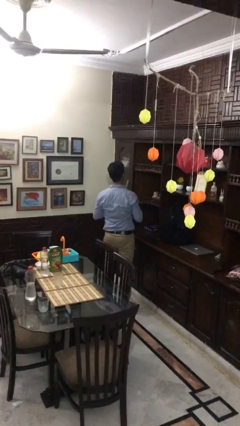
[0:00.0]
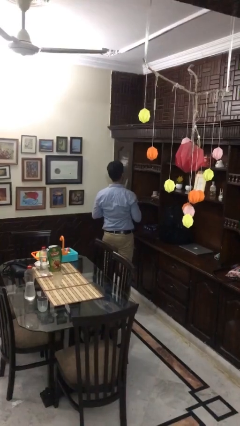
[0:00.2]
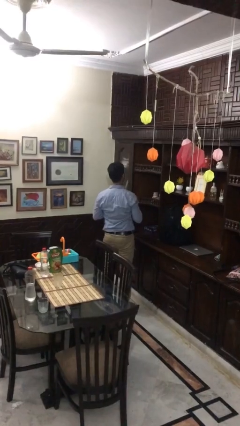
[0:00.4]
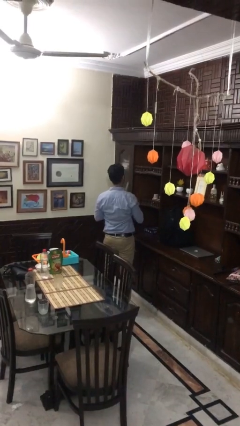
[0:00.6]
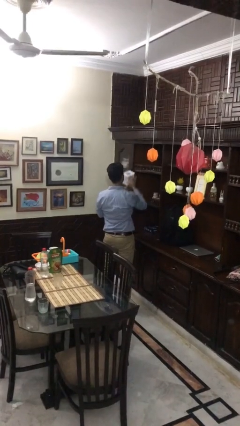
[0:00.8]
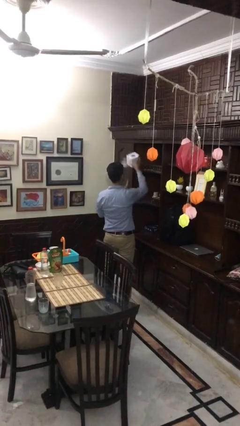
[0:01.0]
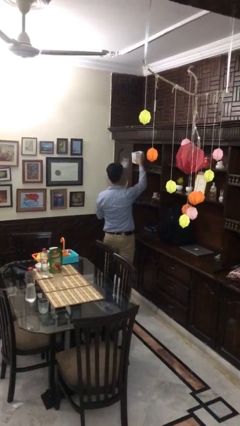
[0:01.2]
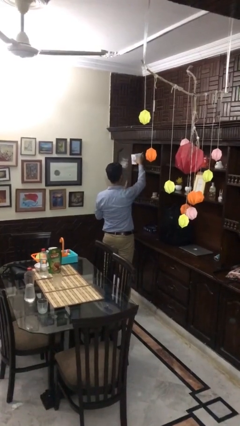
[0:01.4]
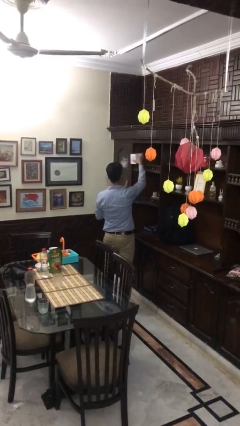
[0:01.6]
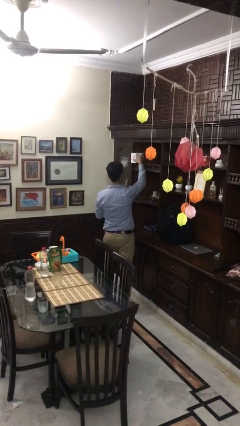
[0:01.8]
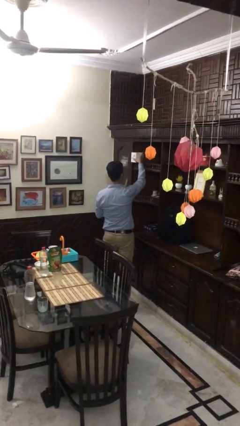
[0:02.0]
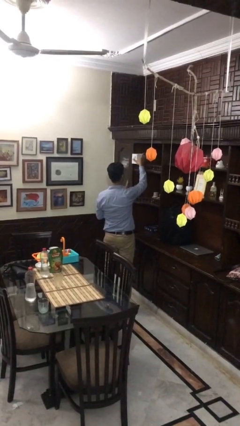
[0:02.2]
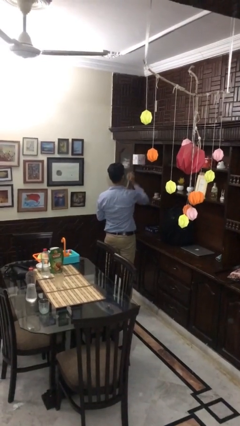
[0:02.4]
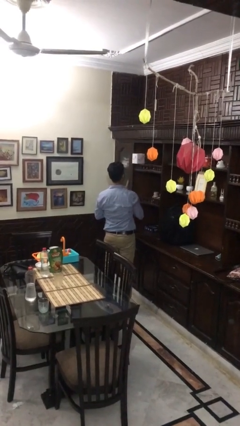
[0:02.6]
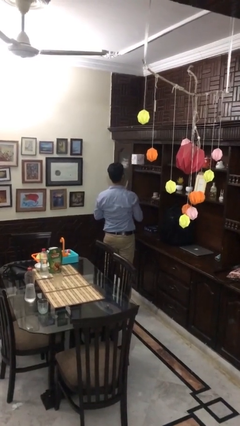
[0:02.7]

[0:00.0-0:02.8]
person puts down object on shelf

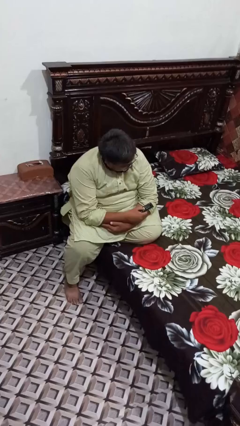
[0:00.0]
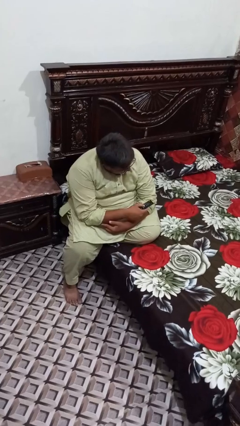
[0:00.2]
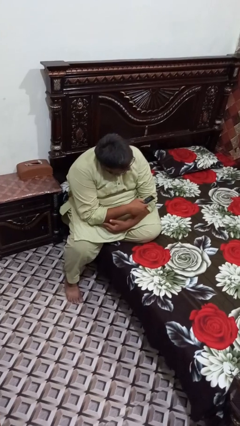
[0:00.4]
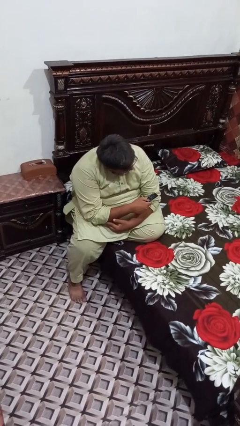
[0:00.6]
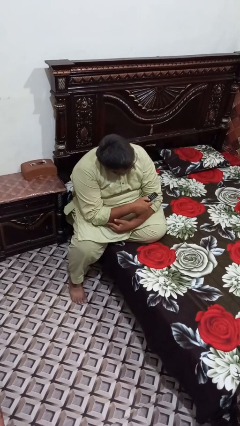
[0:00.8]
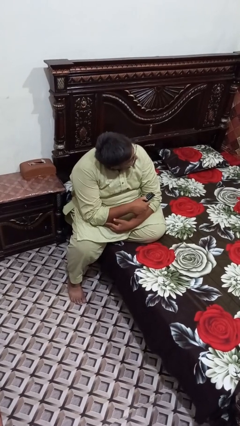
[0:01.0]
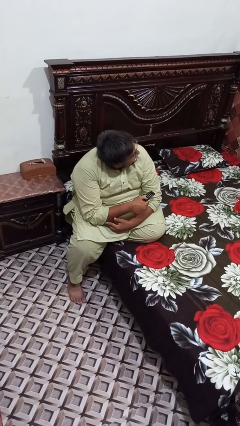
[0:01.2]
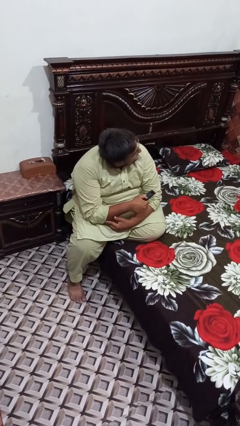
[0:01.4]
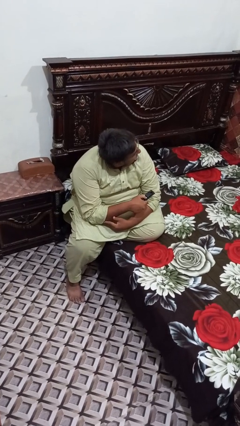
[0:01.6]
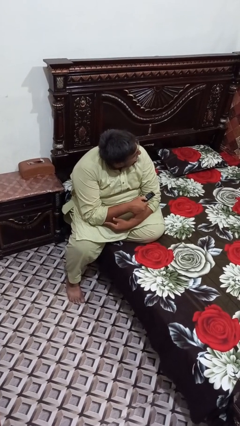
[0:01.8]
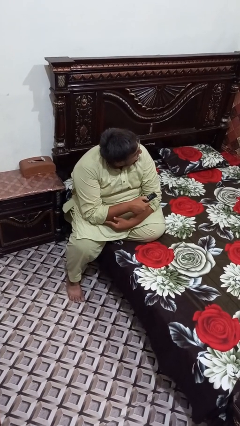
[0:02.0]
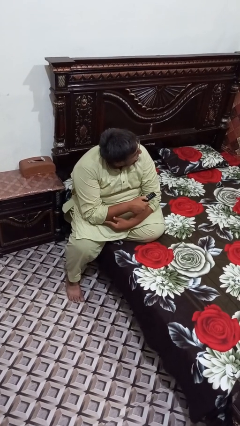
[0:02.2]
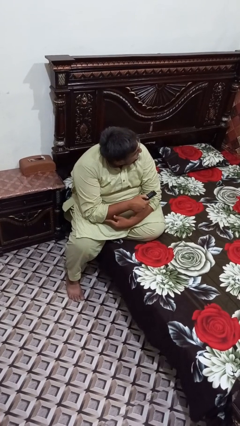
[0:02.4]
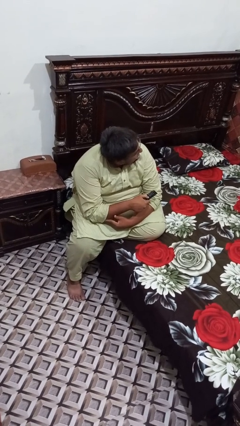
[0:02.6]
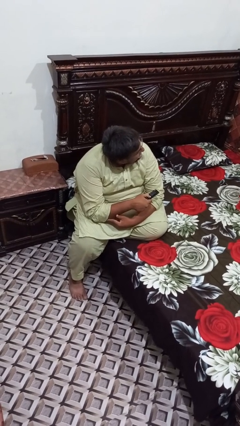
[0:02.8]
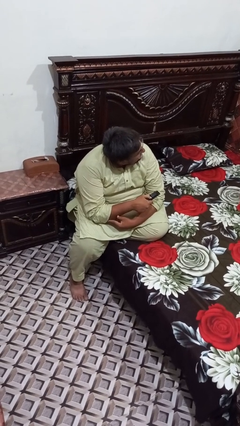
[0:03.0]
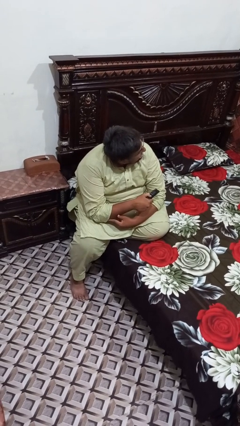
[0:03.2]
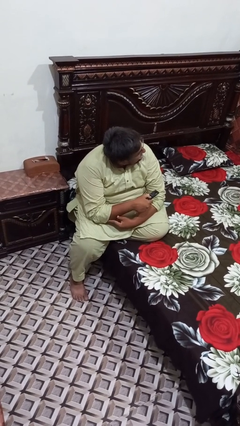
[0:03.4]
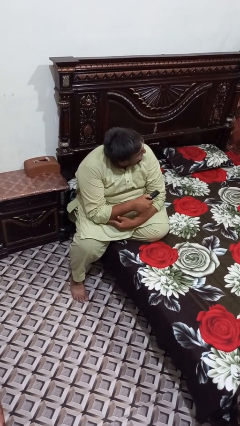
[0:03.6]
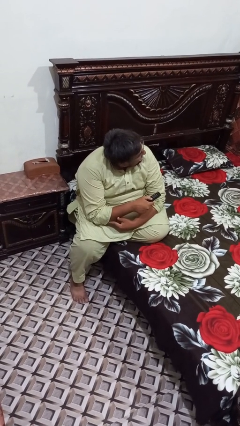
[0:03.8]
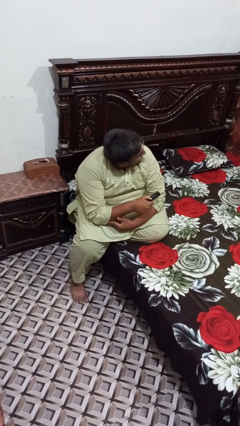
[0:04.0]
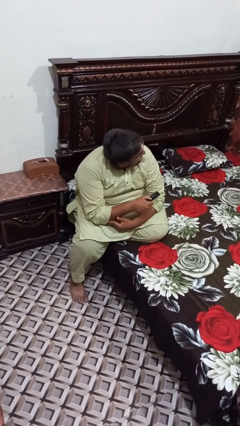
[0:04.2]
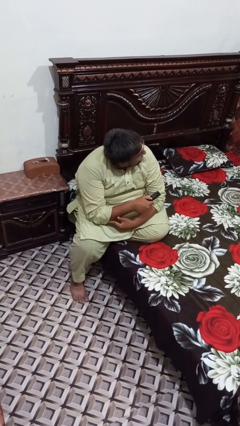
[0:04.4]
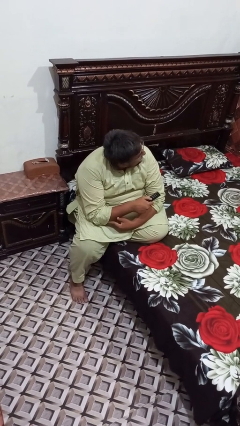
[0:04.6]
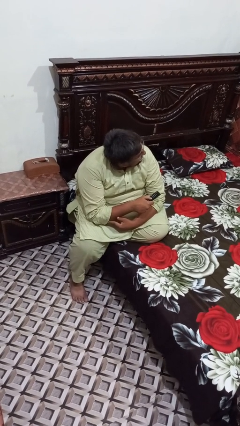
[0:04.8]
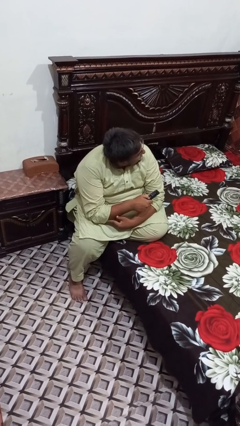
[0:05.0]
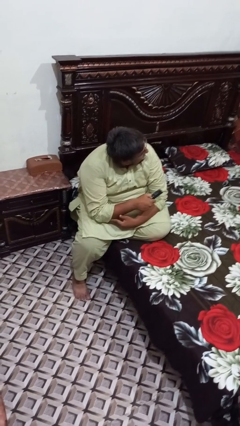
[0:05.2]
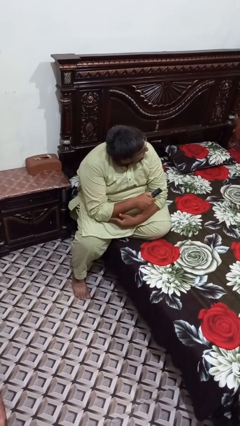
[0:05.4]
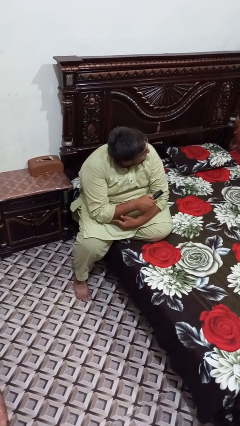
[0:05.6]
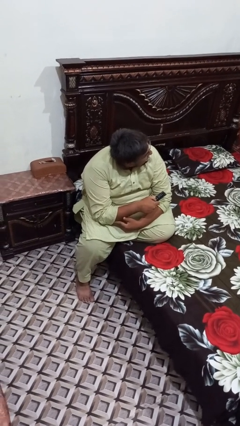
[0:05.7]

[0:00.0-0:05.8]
person uses television remote

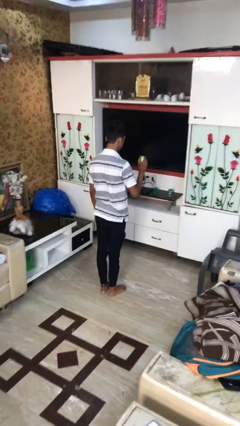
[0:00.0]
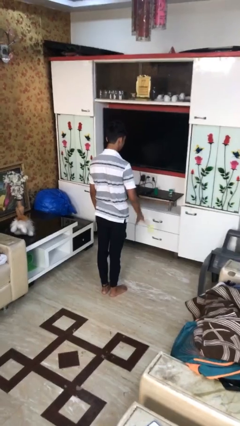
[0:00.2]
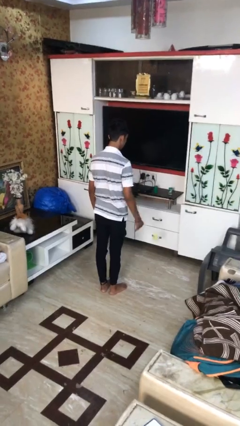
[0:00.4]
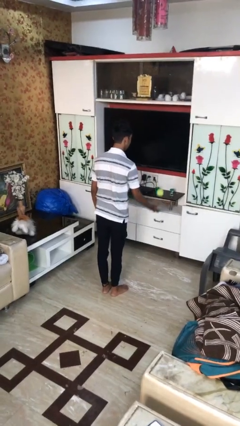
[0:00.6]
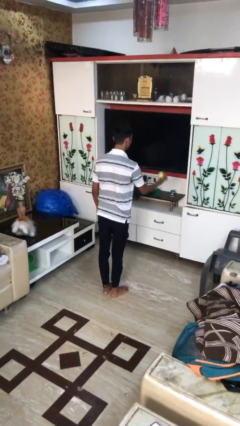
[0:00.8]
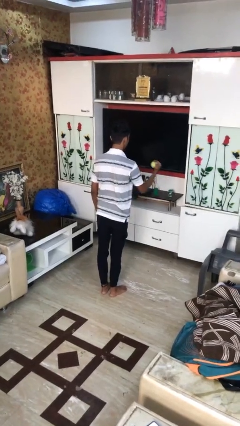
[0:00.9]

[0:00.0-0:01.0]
person bounces ball on floor

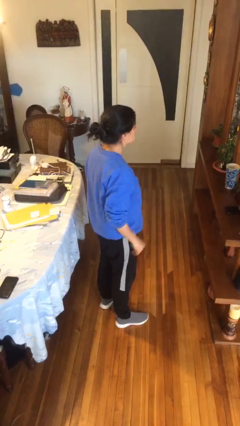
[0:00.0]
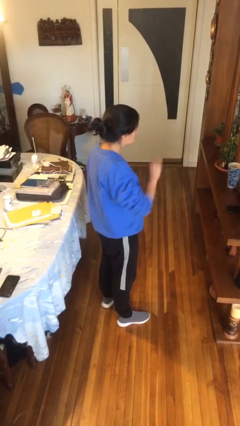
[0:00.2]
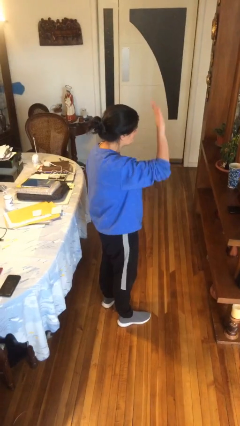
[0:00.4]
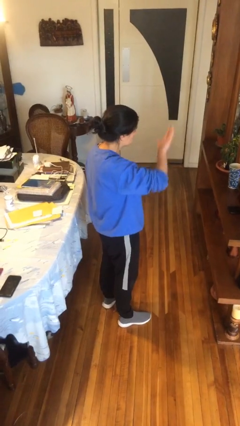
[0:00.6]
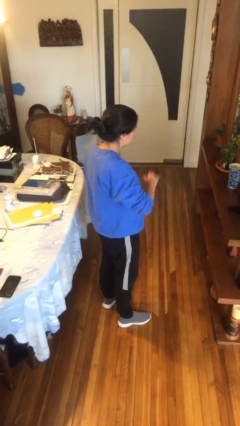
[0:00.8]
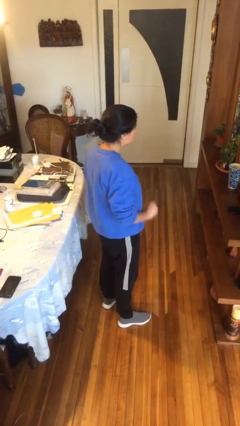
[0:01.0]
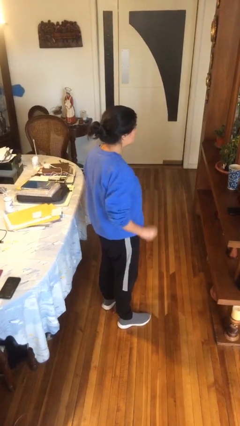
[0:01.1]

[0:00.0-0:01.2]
person gestures swipe down

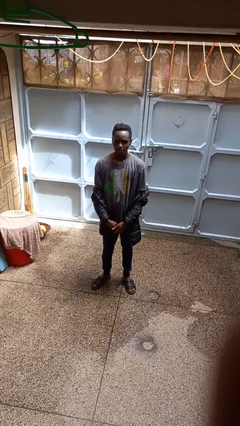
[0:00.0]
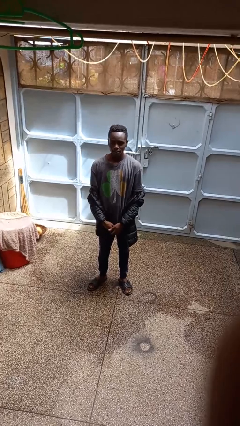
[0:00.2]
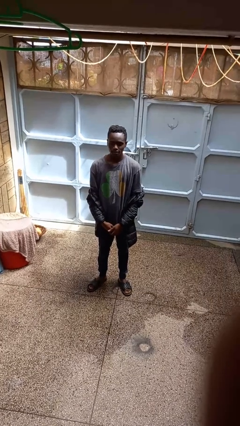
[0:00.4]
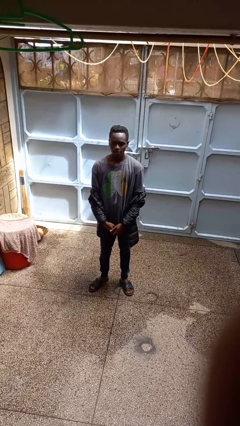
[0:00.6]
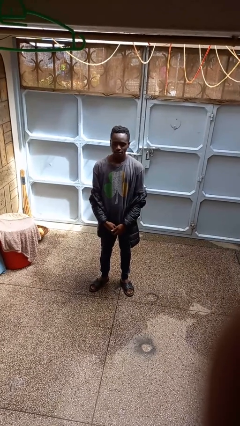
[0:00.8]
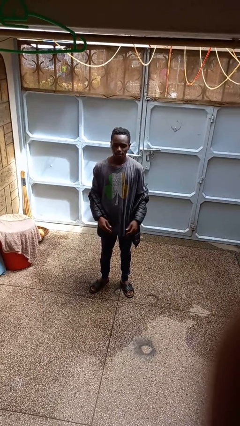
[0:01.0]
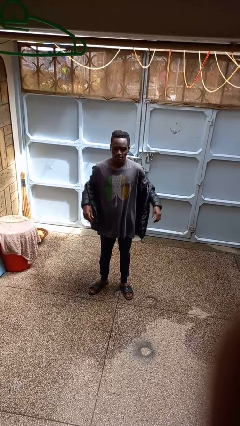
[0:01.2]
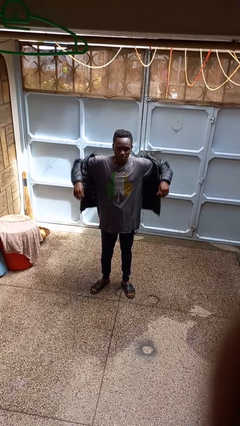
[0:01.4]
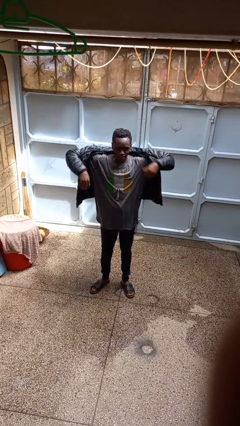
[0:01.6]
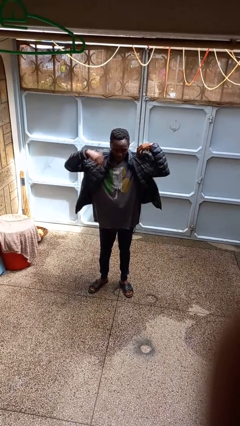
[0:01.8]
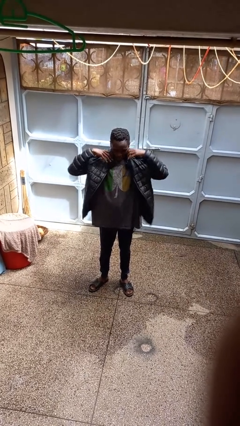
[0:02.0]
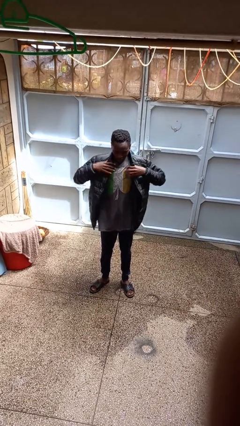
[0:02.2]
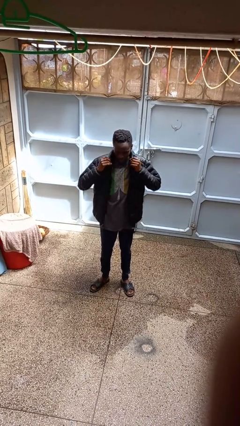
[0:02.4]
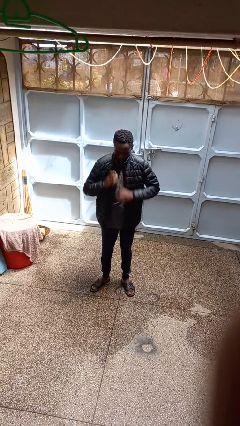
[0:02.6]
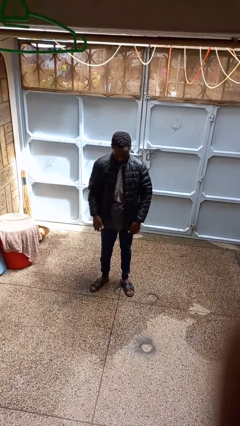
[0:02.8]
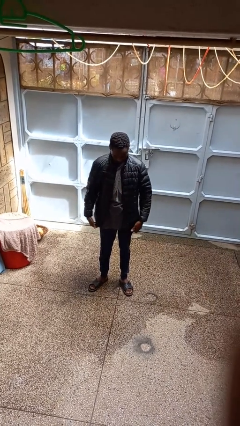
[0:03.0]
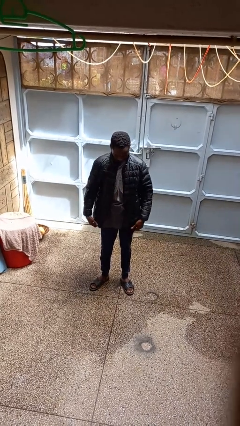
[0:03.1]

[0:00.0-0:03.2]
person puts on jacket

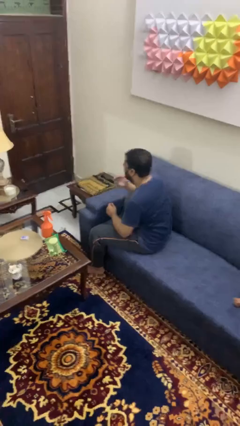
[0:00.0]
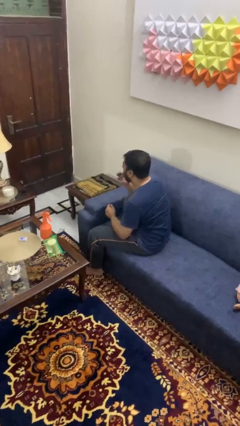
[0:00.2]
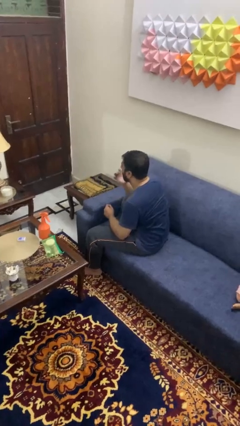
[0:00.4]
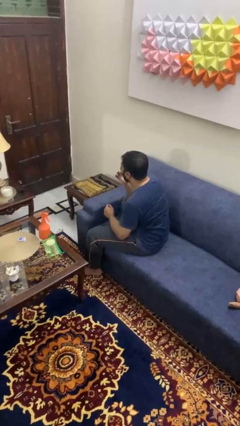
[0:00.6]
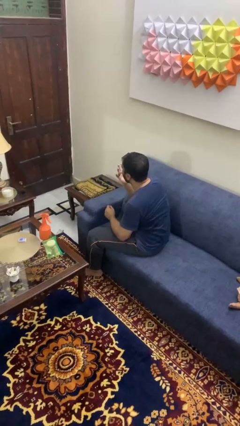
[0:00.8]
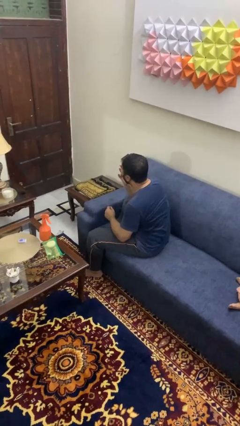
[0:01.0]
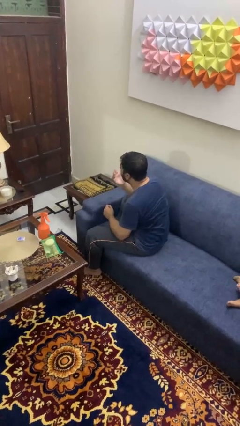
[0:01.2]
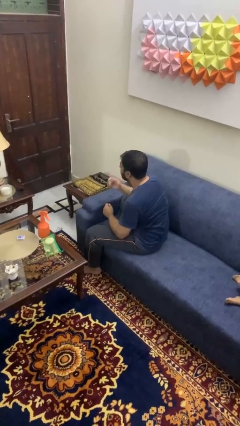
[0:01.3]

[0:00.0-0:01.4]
person licks fingers

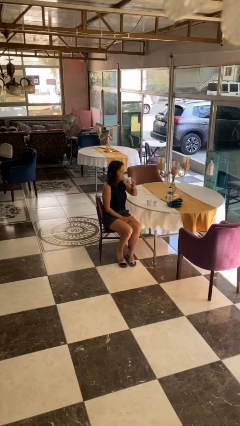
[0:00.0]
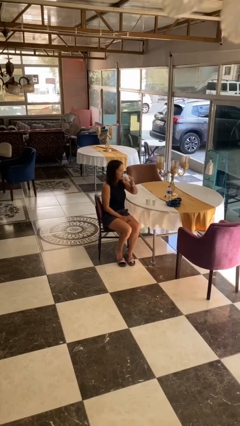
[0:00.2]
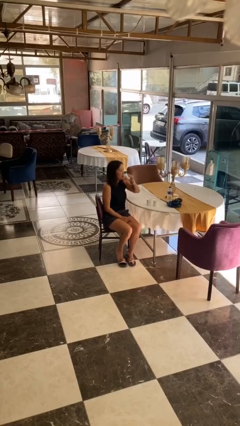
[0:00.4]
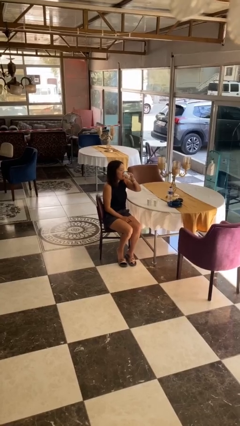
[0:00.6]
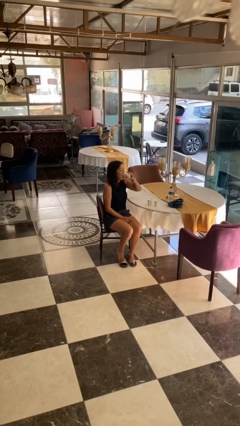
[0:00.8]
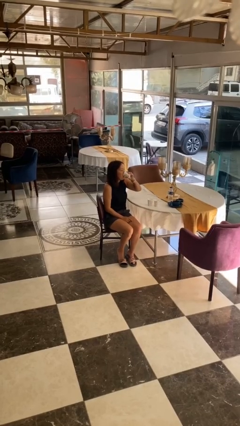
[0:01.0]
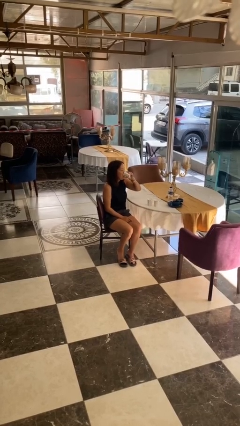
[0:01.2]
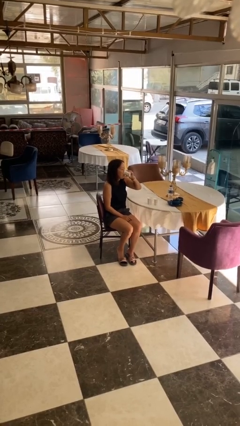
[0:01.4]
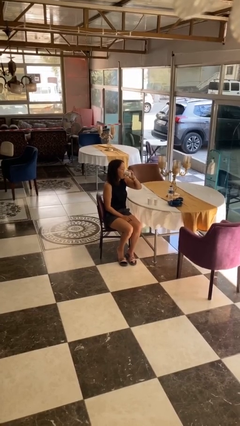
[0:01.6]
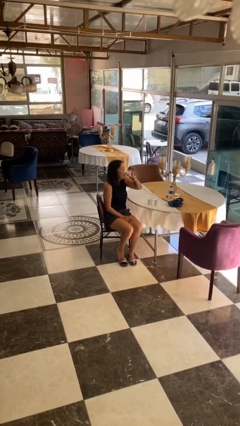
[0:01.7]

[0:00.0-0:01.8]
person drinks from shotglass
